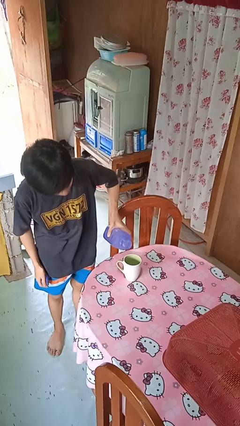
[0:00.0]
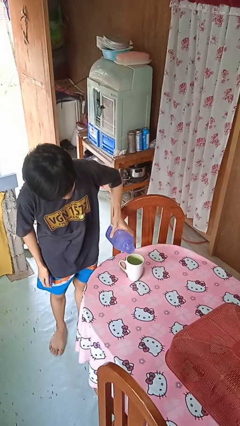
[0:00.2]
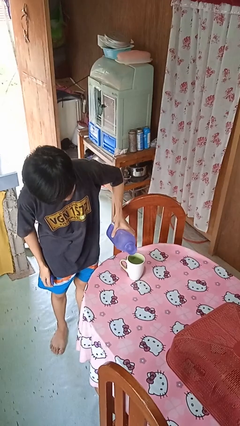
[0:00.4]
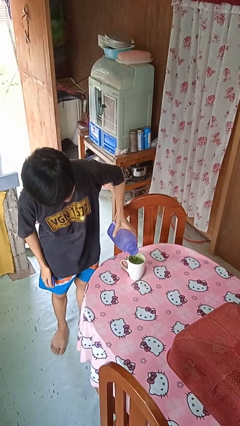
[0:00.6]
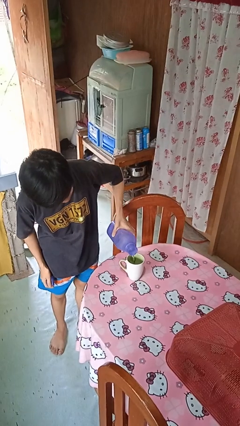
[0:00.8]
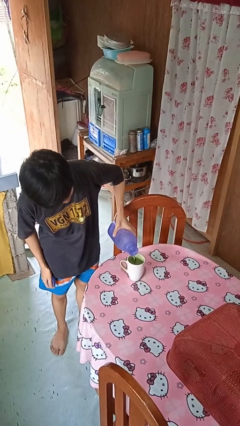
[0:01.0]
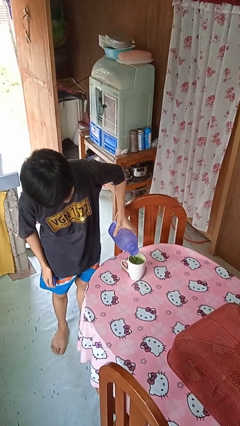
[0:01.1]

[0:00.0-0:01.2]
person pours liquid into cup

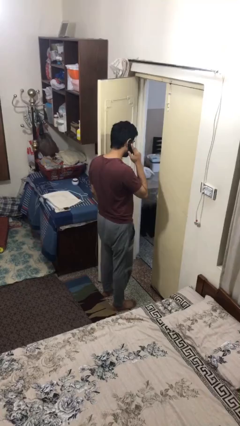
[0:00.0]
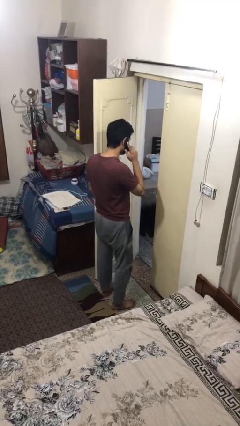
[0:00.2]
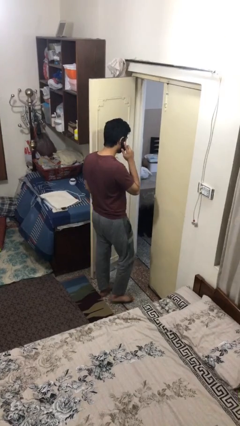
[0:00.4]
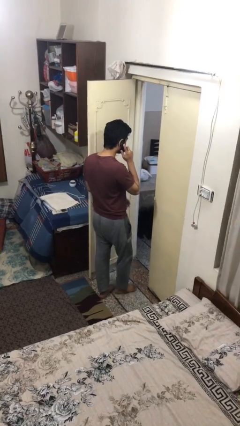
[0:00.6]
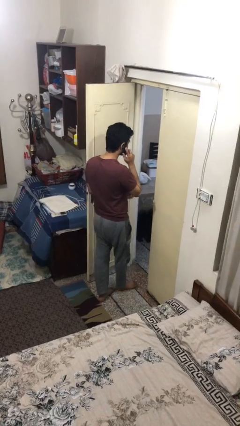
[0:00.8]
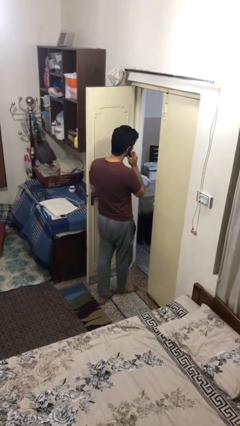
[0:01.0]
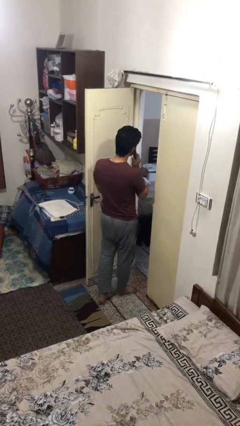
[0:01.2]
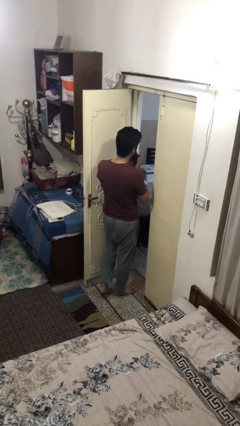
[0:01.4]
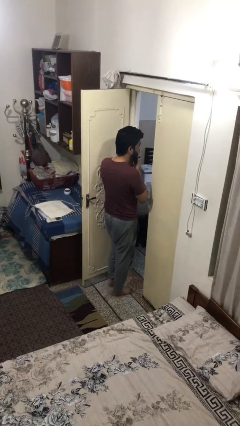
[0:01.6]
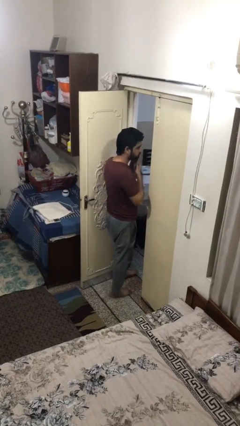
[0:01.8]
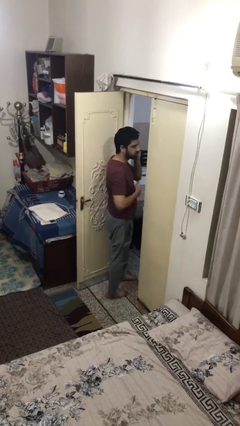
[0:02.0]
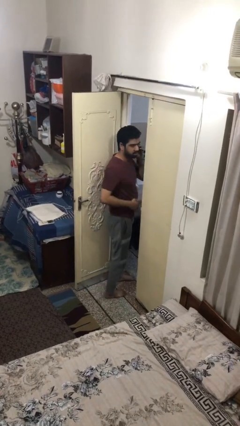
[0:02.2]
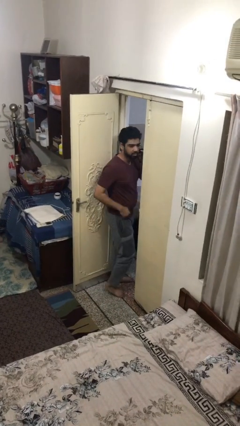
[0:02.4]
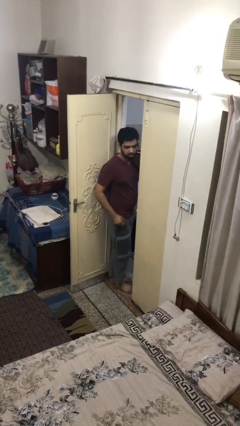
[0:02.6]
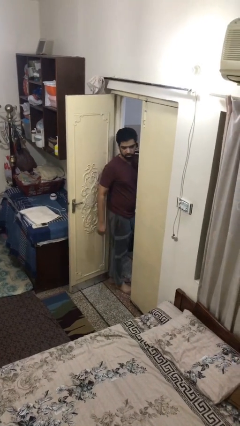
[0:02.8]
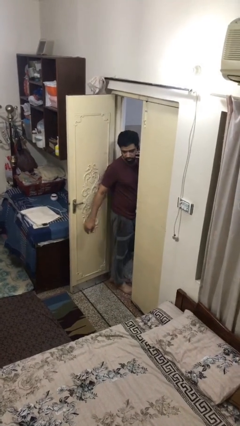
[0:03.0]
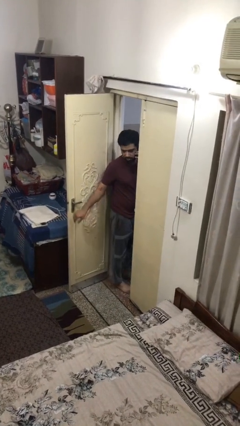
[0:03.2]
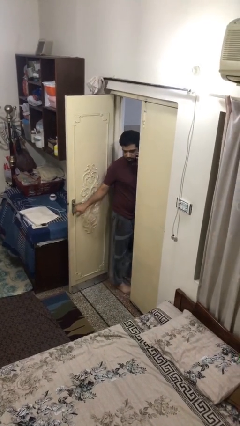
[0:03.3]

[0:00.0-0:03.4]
person exits scene through structure

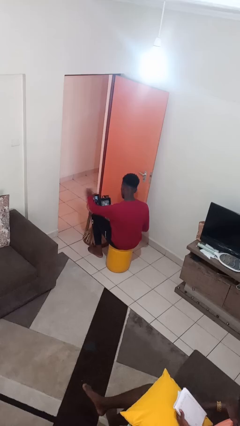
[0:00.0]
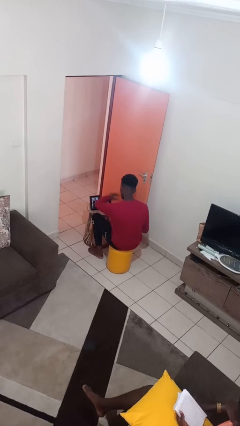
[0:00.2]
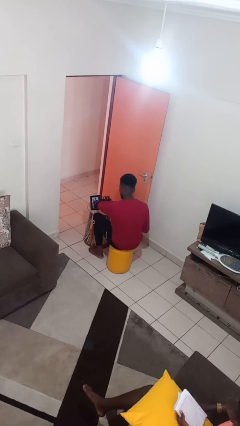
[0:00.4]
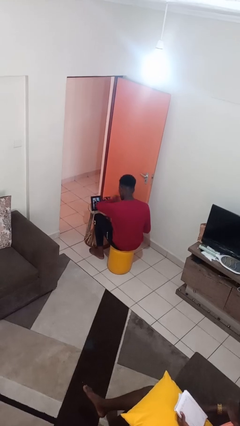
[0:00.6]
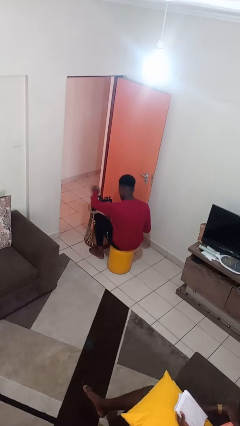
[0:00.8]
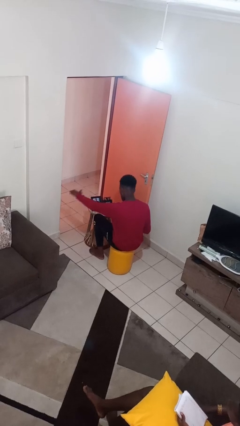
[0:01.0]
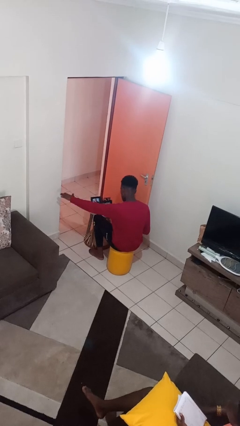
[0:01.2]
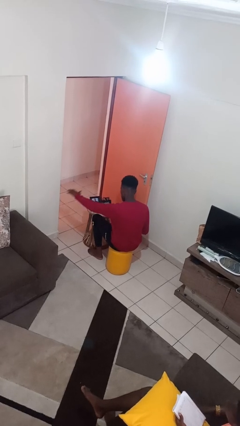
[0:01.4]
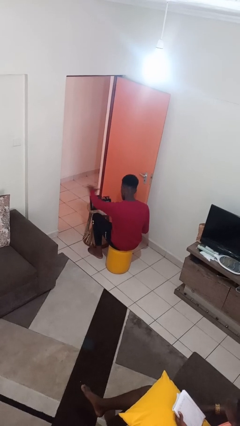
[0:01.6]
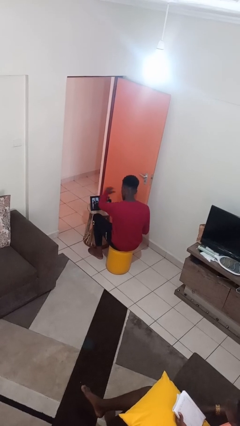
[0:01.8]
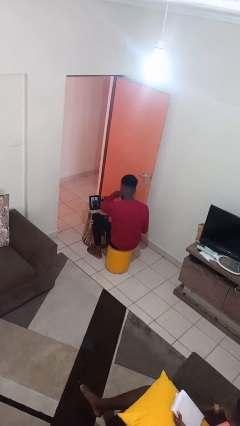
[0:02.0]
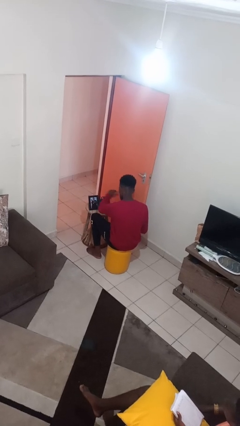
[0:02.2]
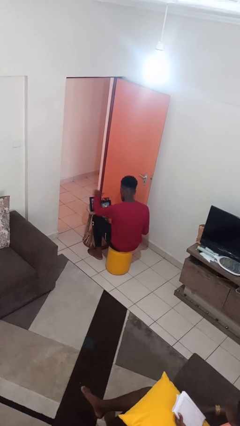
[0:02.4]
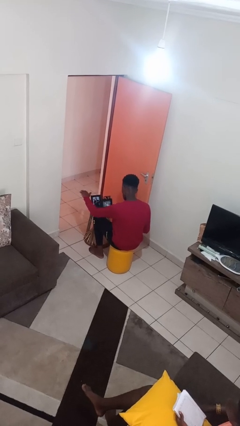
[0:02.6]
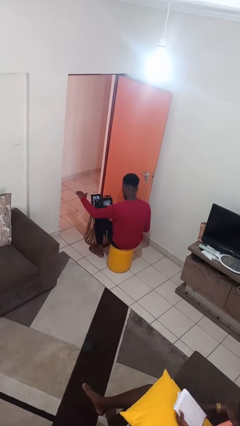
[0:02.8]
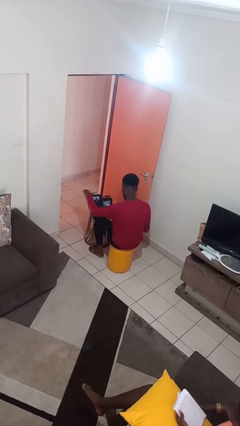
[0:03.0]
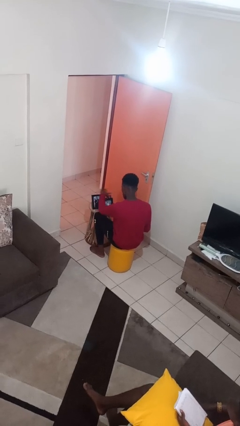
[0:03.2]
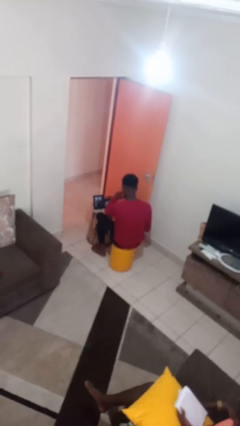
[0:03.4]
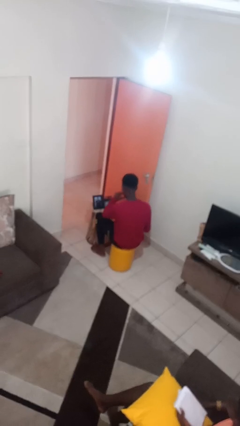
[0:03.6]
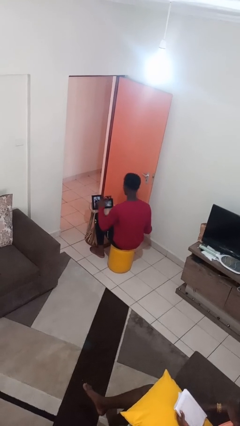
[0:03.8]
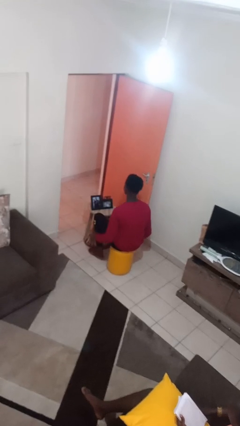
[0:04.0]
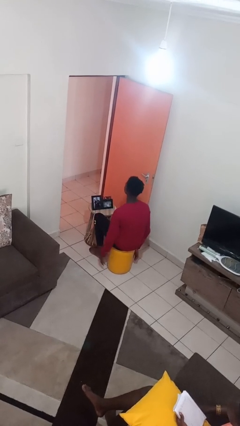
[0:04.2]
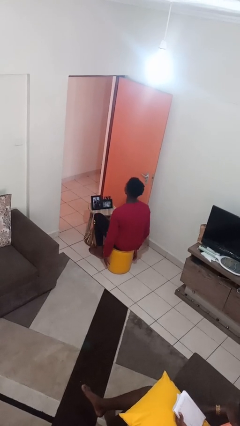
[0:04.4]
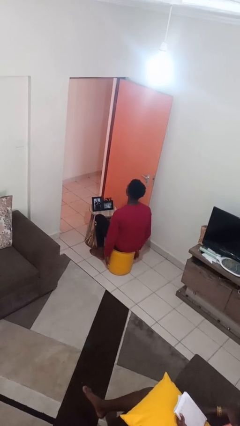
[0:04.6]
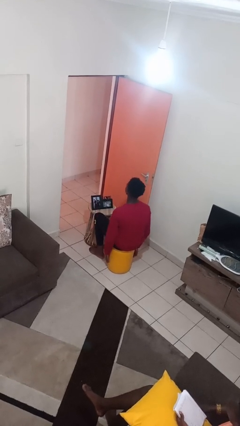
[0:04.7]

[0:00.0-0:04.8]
person waves hand over object

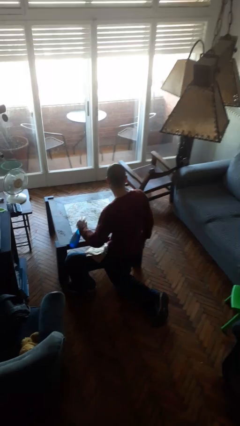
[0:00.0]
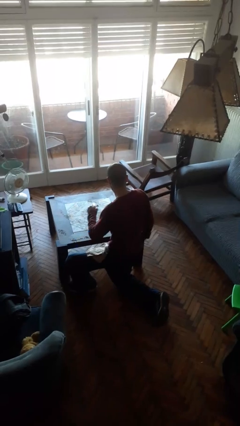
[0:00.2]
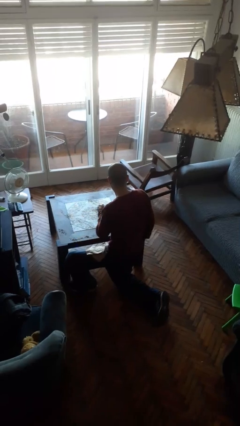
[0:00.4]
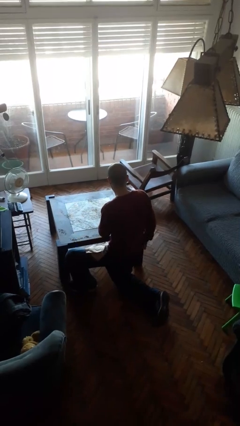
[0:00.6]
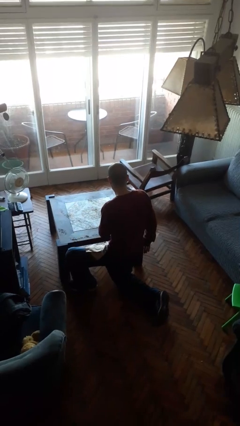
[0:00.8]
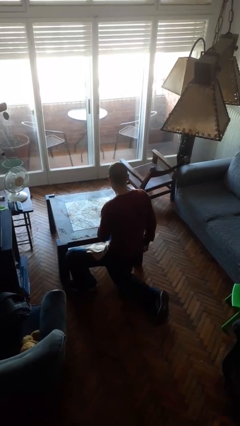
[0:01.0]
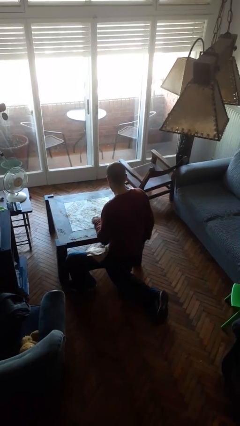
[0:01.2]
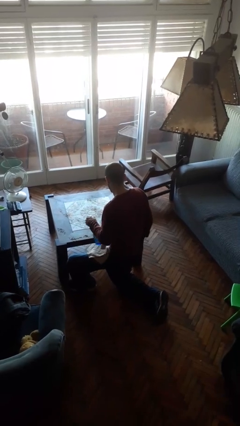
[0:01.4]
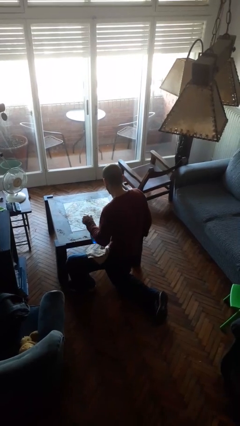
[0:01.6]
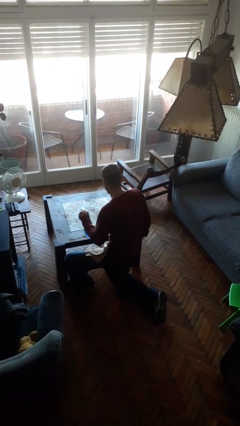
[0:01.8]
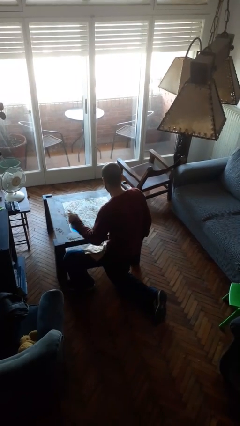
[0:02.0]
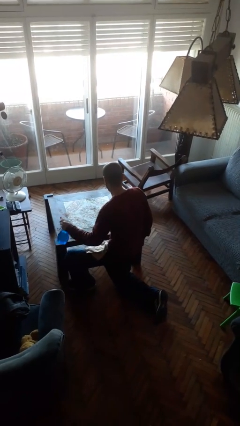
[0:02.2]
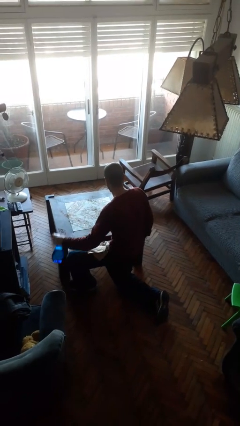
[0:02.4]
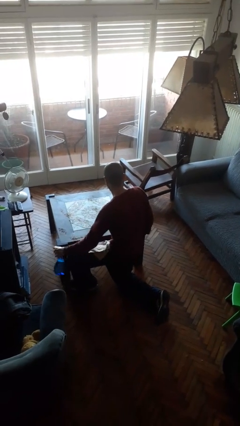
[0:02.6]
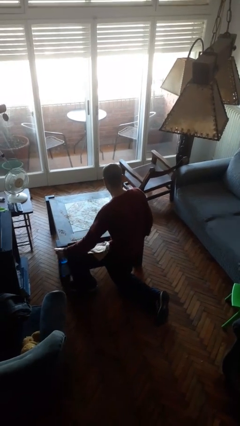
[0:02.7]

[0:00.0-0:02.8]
person sprays from bottle

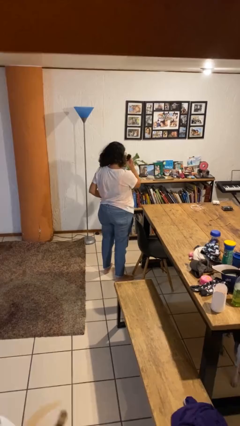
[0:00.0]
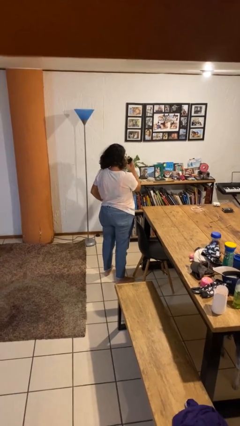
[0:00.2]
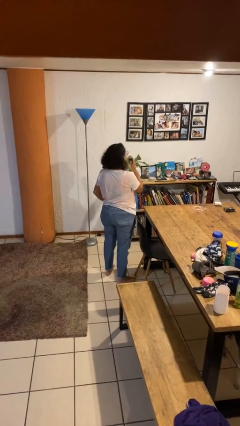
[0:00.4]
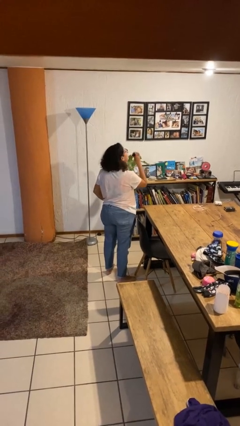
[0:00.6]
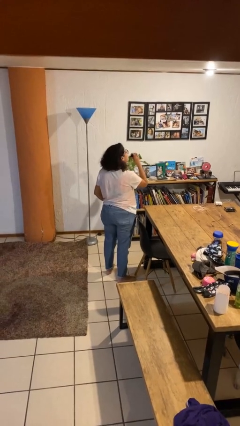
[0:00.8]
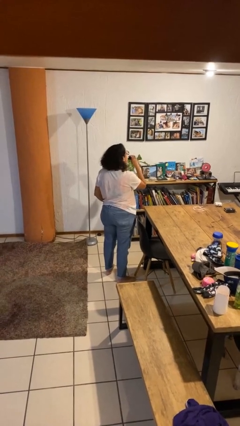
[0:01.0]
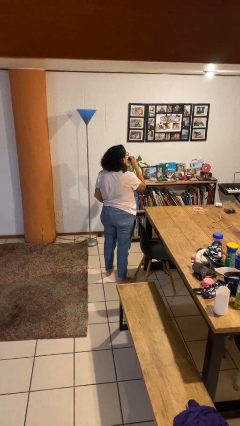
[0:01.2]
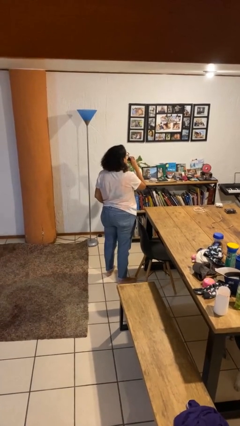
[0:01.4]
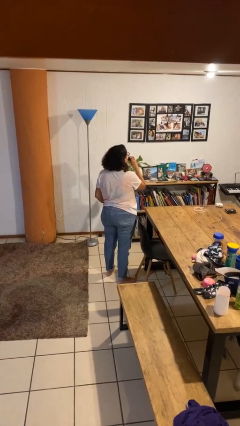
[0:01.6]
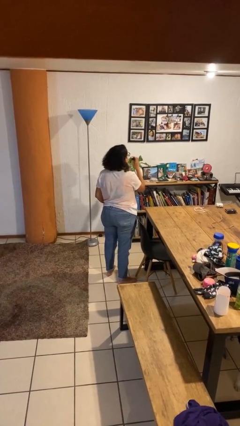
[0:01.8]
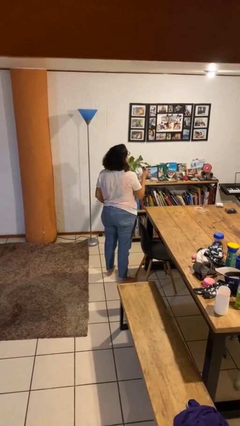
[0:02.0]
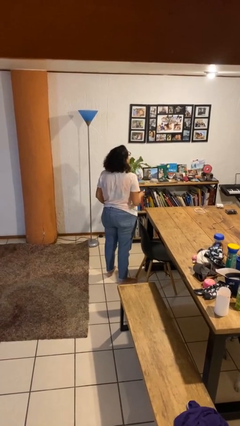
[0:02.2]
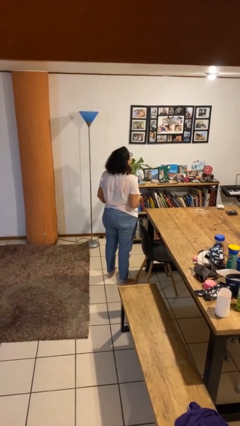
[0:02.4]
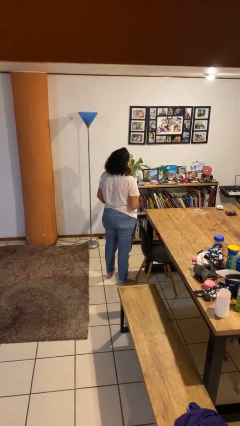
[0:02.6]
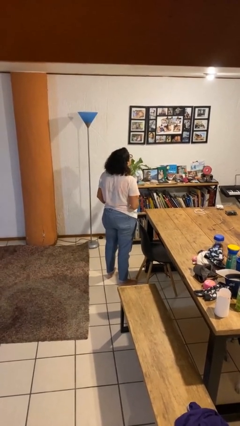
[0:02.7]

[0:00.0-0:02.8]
person vapes

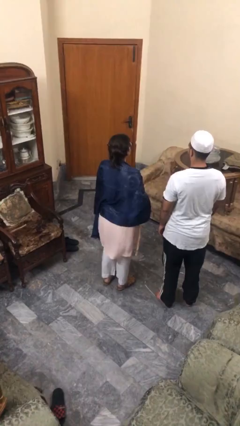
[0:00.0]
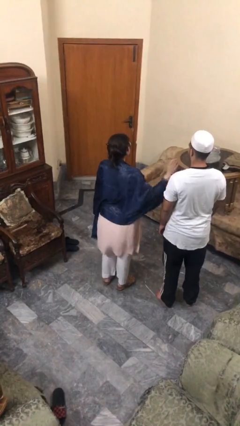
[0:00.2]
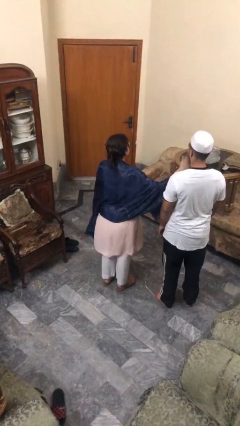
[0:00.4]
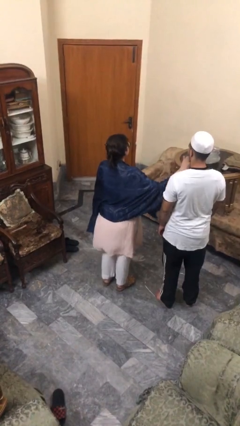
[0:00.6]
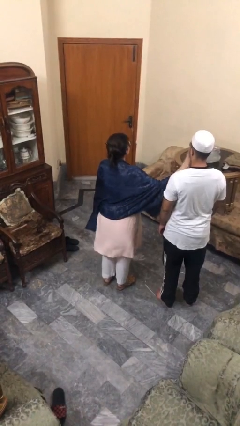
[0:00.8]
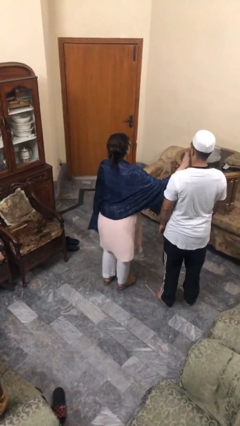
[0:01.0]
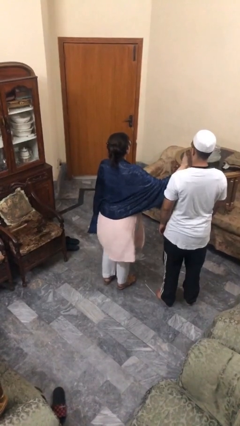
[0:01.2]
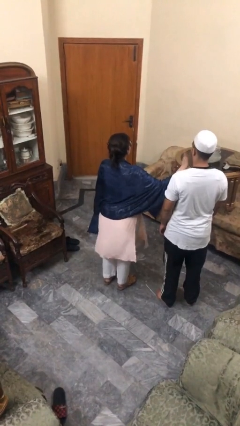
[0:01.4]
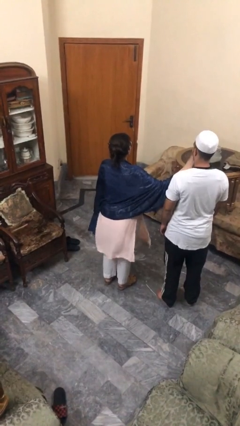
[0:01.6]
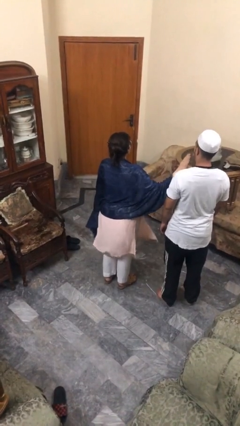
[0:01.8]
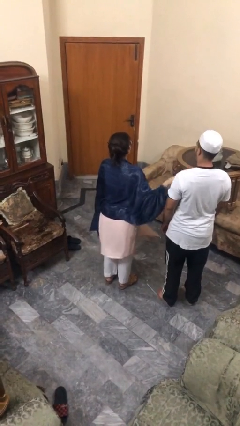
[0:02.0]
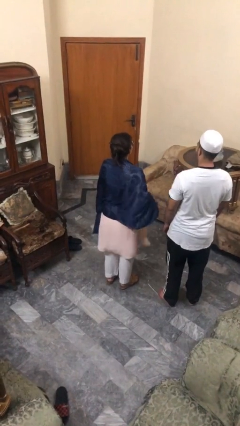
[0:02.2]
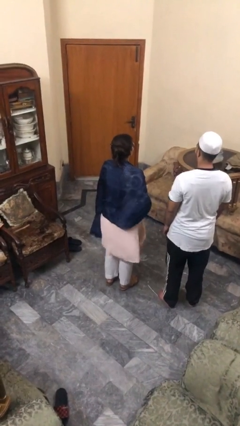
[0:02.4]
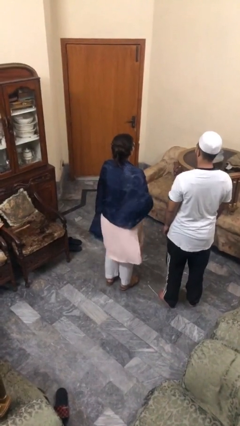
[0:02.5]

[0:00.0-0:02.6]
person touches face of person
